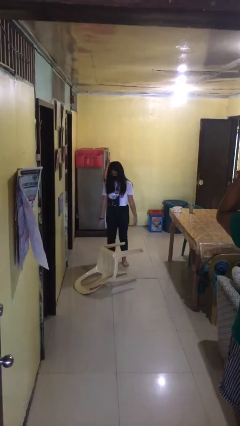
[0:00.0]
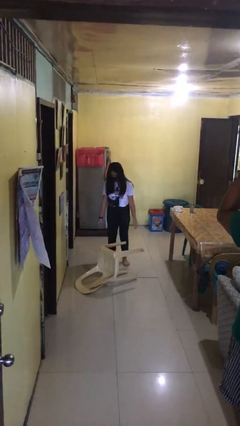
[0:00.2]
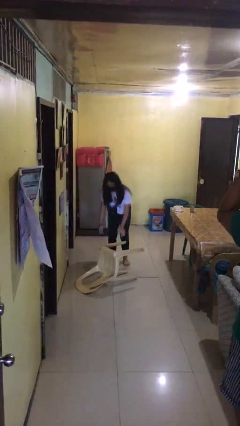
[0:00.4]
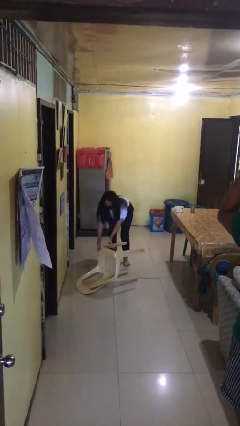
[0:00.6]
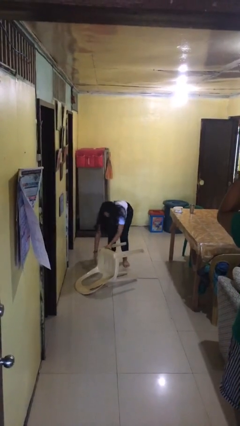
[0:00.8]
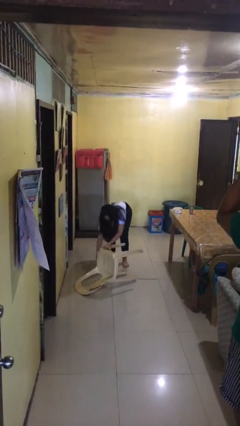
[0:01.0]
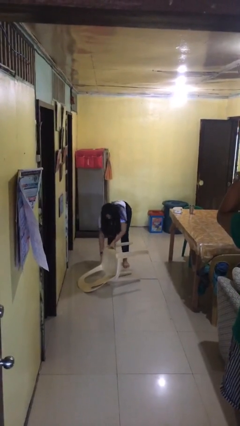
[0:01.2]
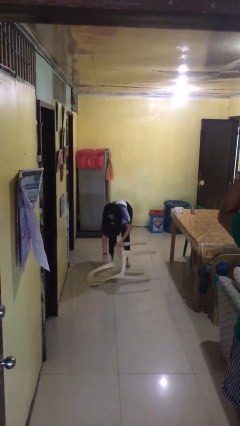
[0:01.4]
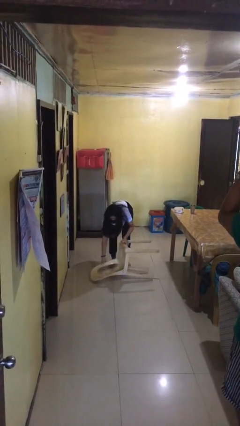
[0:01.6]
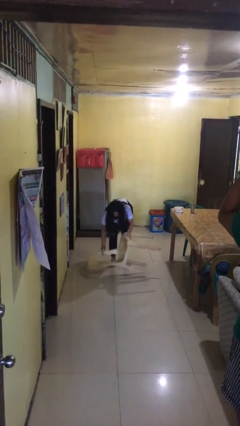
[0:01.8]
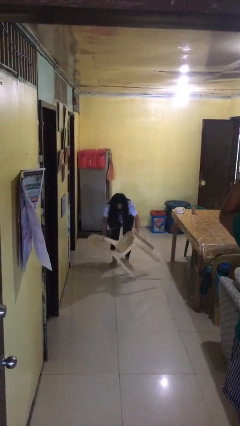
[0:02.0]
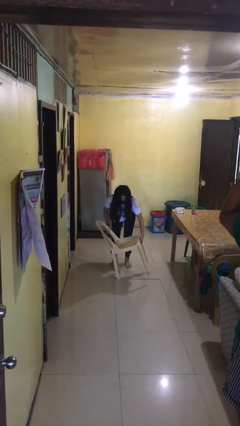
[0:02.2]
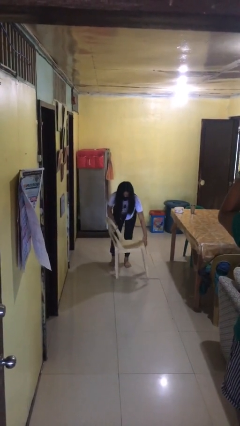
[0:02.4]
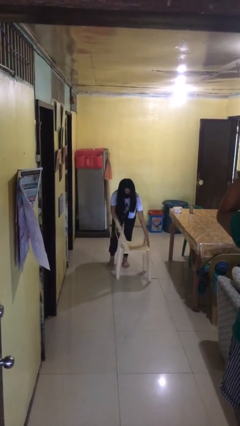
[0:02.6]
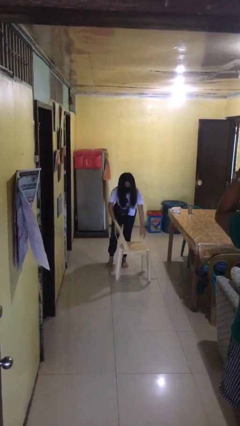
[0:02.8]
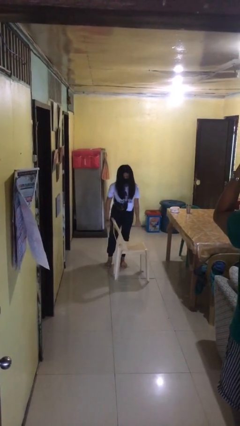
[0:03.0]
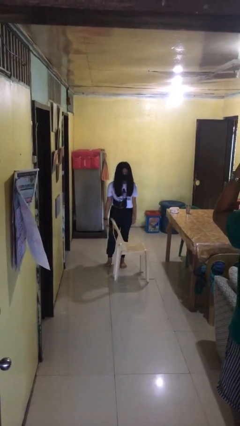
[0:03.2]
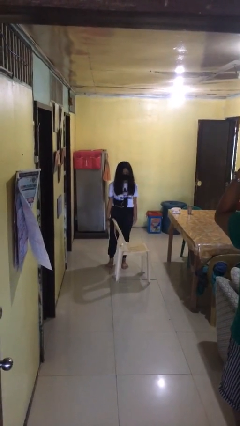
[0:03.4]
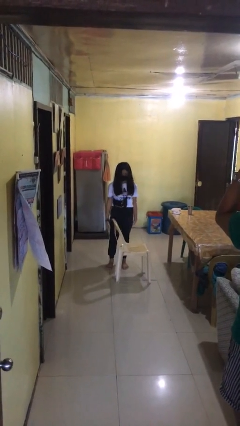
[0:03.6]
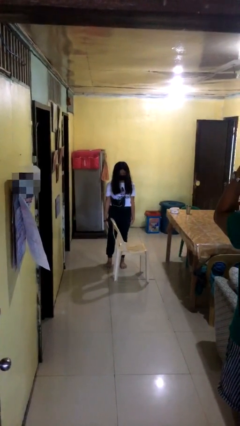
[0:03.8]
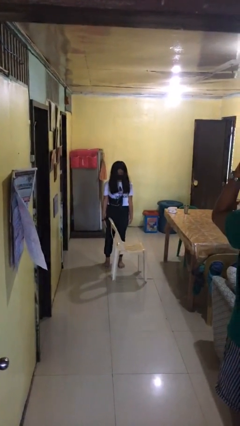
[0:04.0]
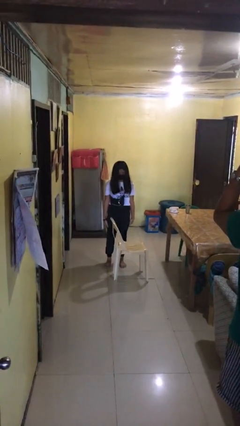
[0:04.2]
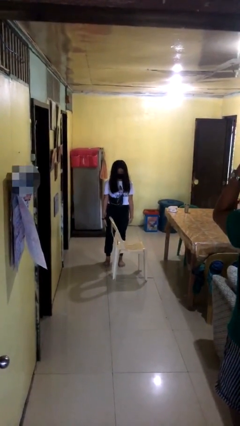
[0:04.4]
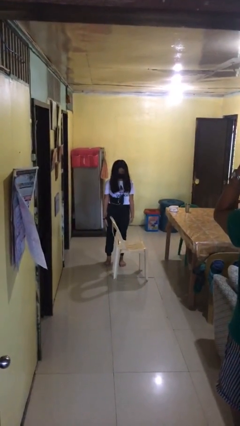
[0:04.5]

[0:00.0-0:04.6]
person sets upright furniture

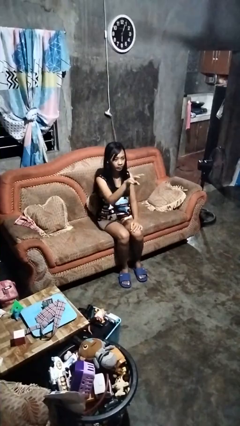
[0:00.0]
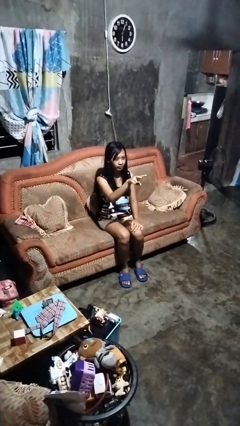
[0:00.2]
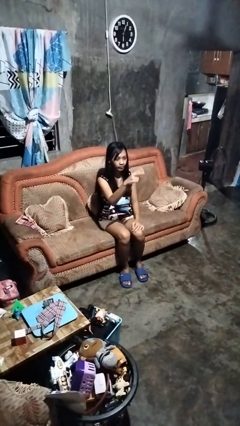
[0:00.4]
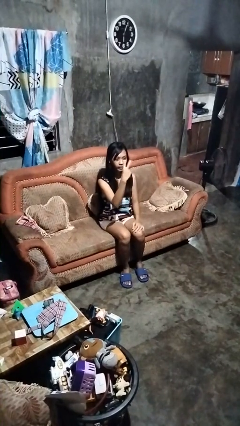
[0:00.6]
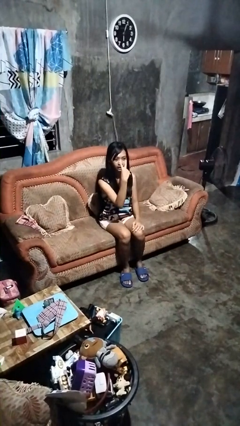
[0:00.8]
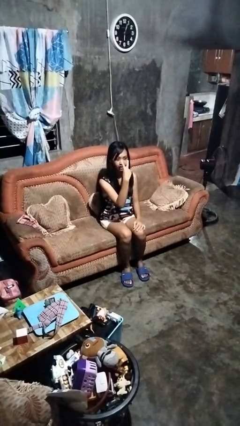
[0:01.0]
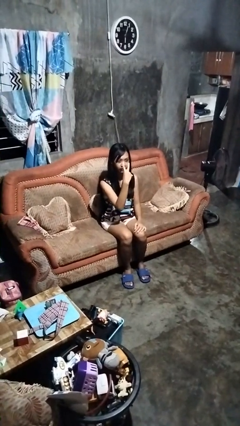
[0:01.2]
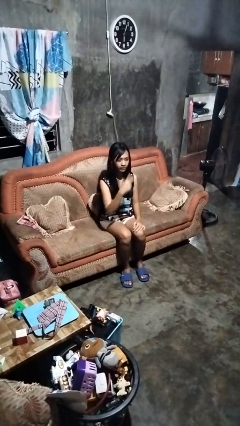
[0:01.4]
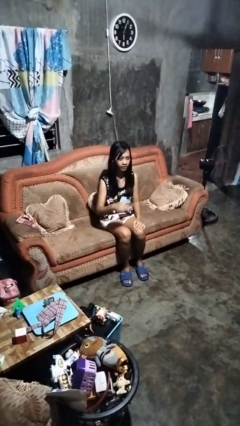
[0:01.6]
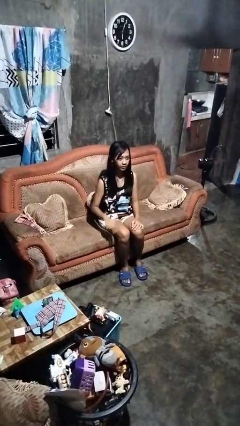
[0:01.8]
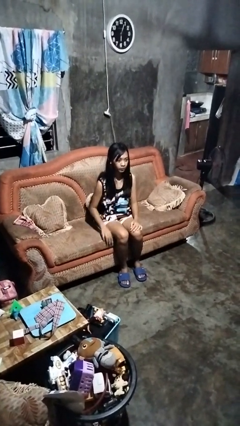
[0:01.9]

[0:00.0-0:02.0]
person gestures watch closely

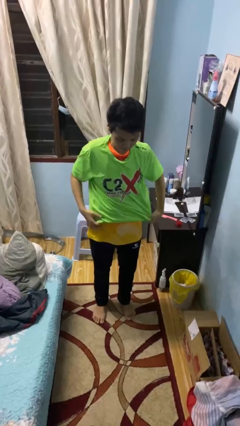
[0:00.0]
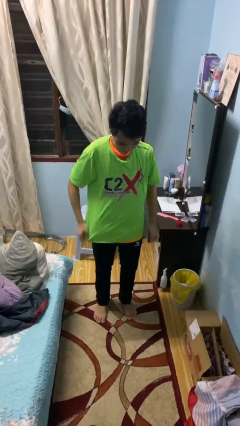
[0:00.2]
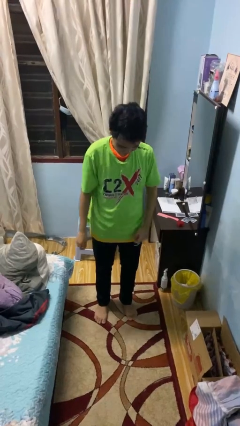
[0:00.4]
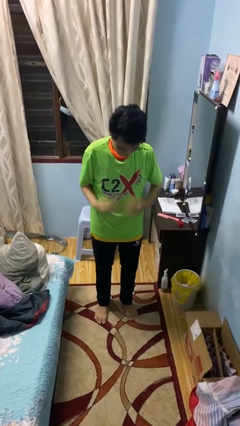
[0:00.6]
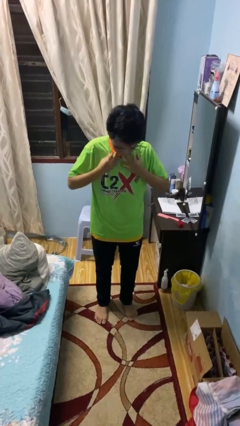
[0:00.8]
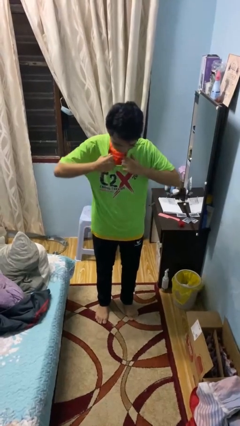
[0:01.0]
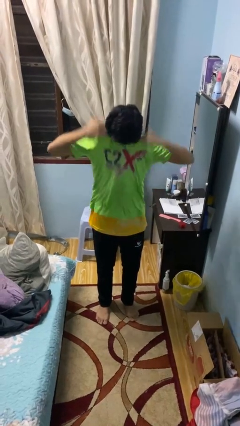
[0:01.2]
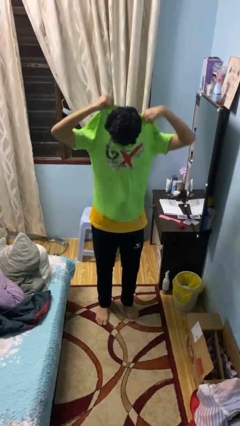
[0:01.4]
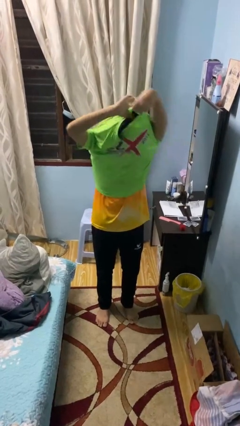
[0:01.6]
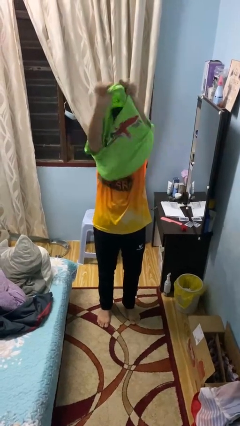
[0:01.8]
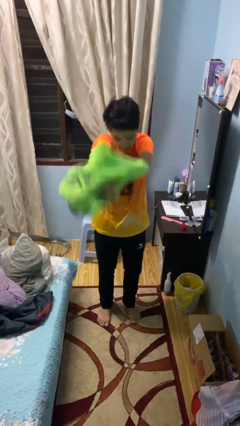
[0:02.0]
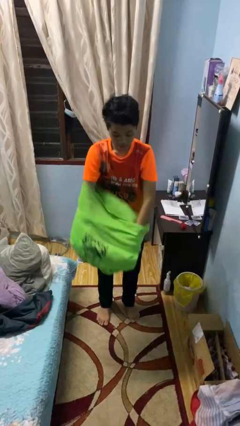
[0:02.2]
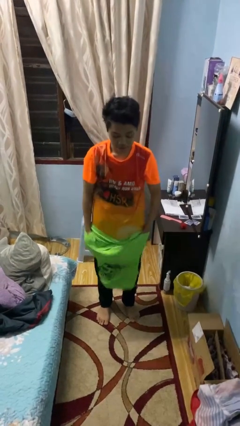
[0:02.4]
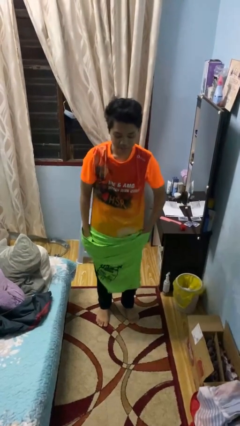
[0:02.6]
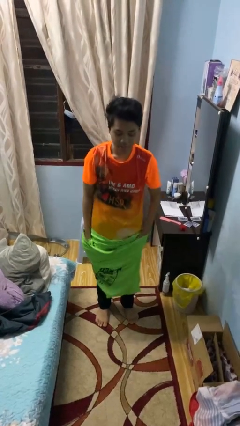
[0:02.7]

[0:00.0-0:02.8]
person takes off shirt

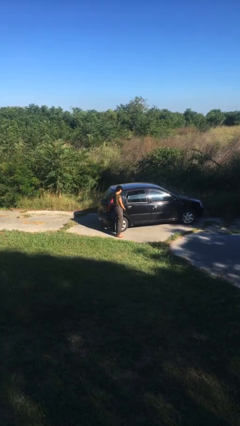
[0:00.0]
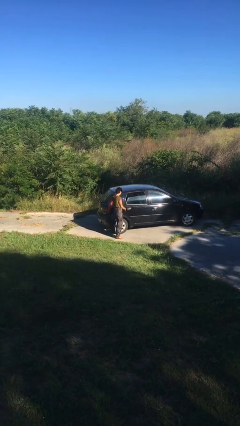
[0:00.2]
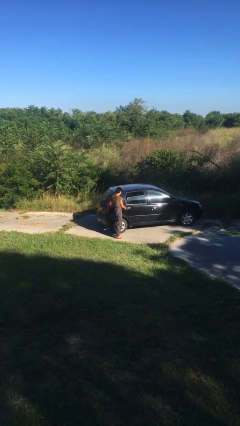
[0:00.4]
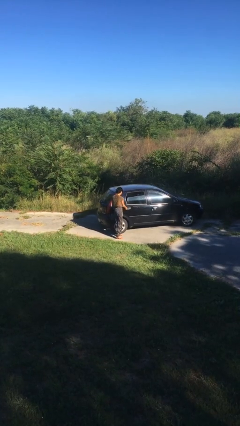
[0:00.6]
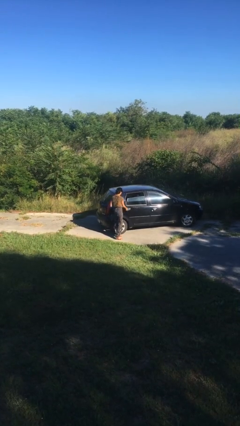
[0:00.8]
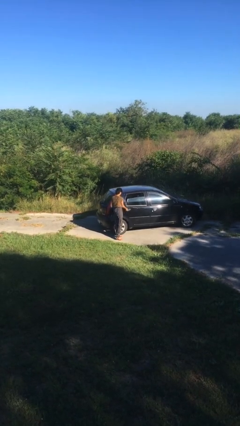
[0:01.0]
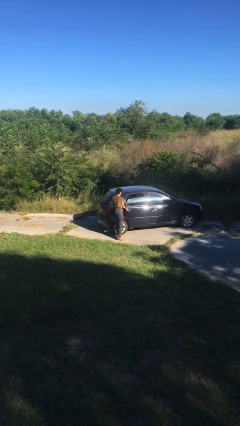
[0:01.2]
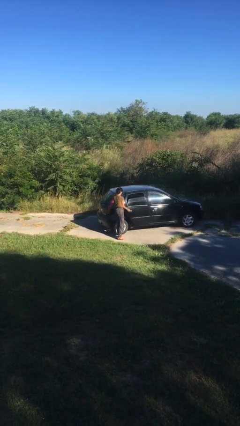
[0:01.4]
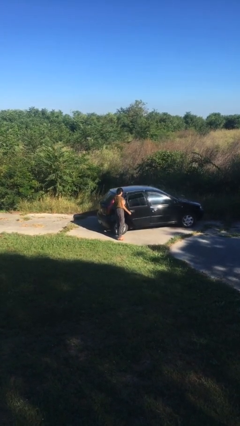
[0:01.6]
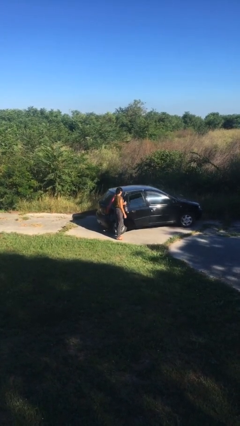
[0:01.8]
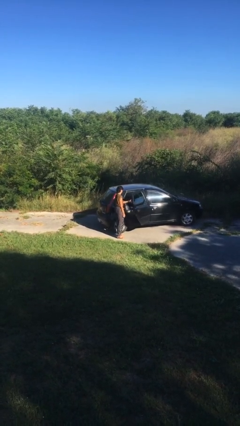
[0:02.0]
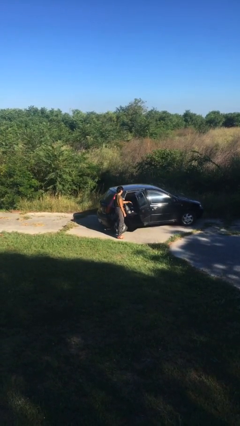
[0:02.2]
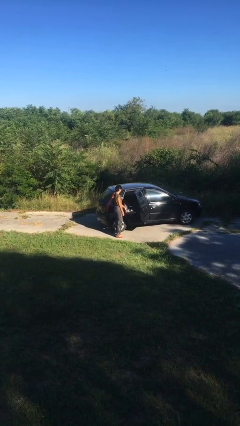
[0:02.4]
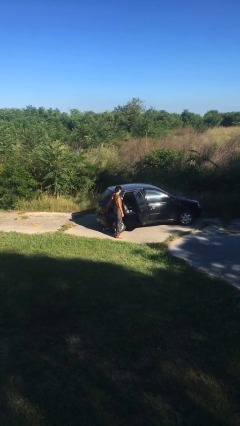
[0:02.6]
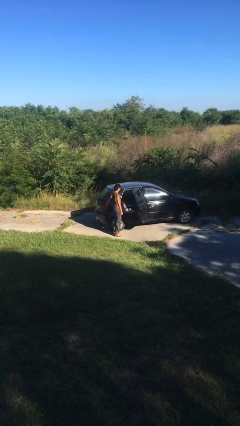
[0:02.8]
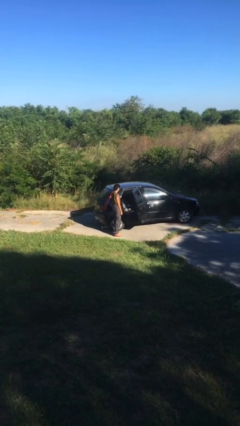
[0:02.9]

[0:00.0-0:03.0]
person opens car door

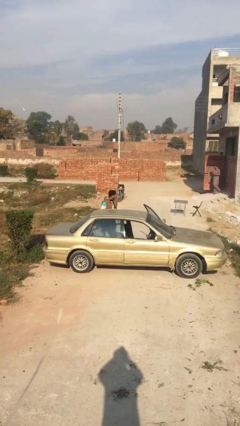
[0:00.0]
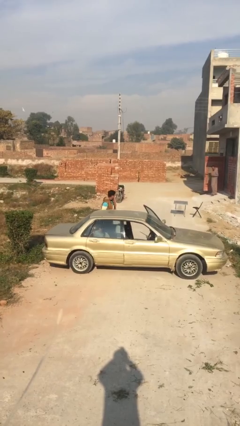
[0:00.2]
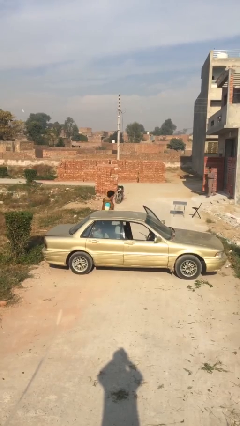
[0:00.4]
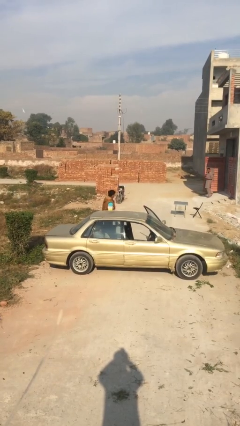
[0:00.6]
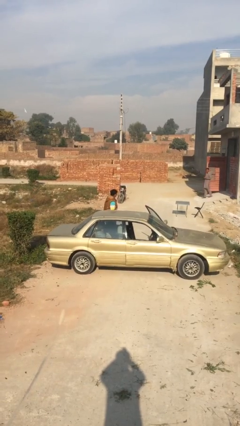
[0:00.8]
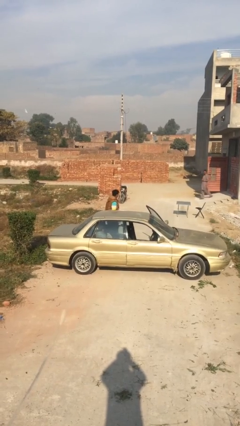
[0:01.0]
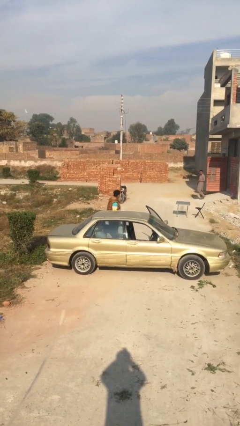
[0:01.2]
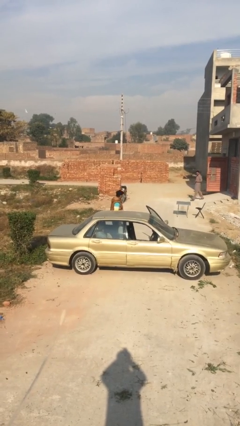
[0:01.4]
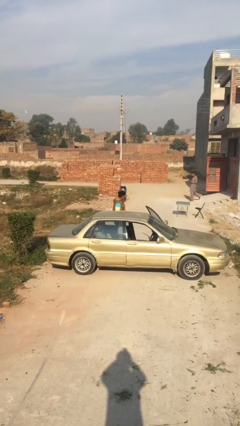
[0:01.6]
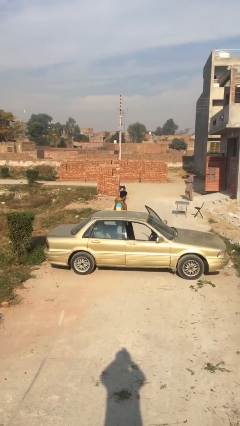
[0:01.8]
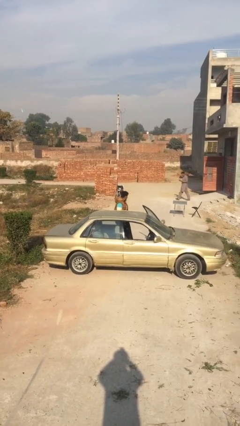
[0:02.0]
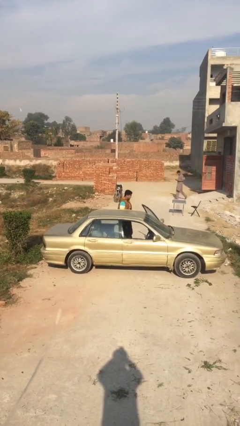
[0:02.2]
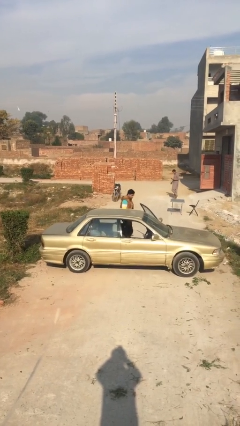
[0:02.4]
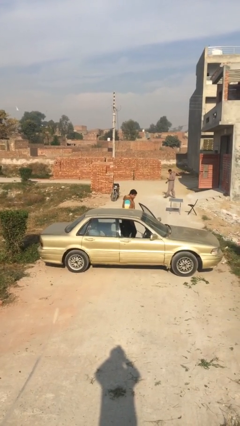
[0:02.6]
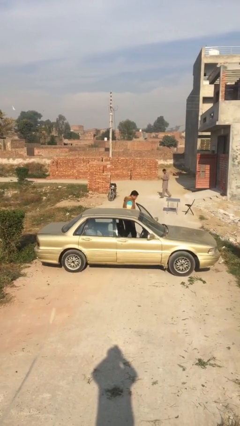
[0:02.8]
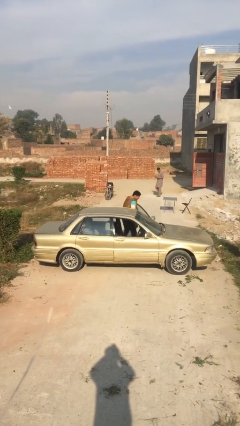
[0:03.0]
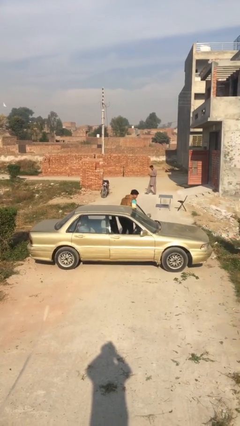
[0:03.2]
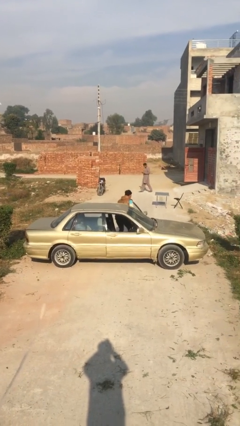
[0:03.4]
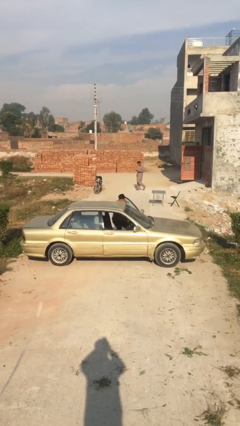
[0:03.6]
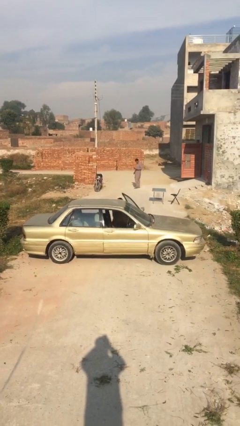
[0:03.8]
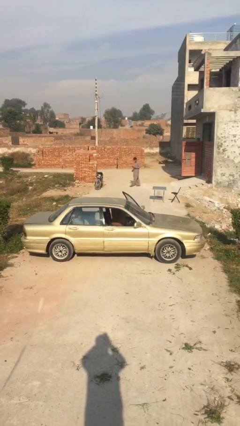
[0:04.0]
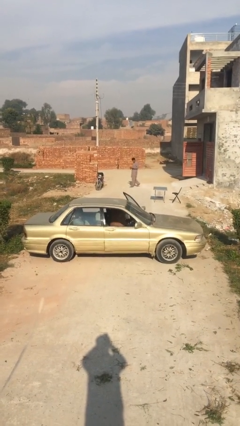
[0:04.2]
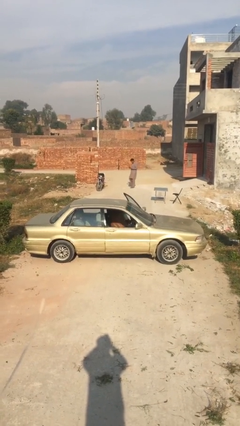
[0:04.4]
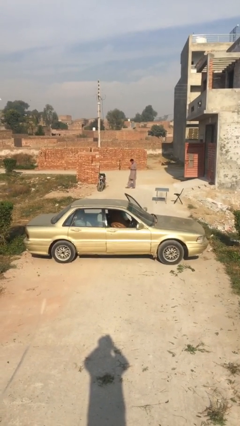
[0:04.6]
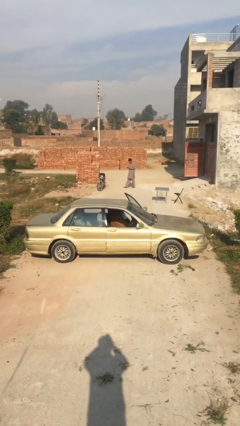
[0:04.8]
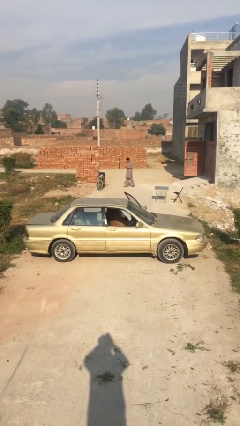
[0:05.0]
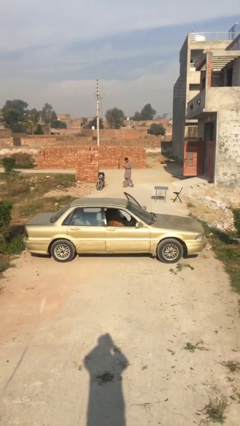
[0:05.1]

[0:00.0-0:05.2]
person enters car
